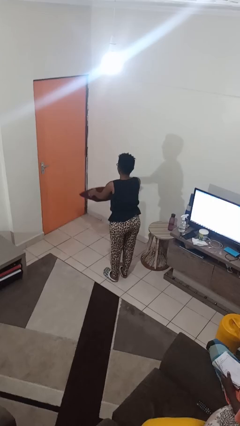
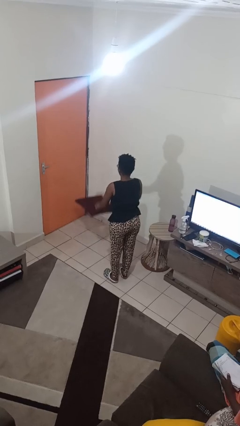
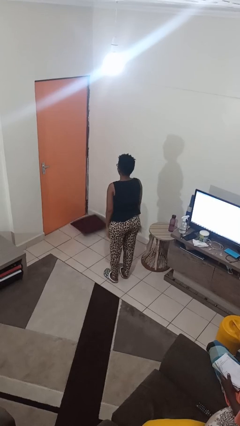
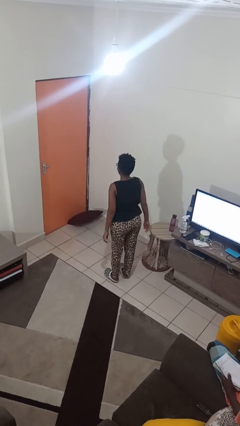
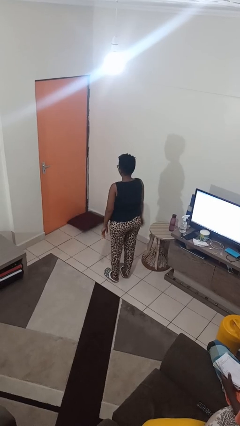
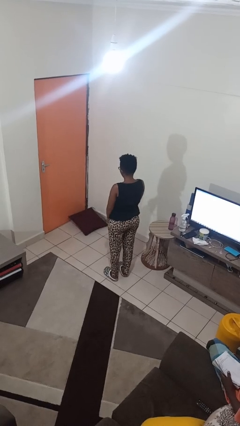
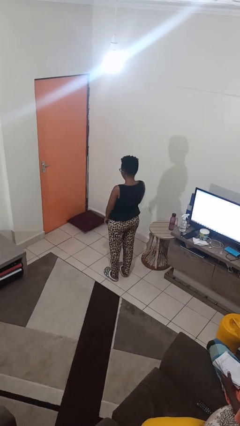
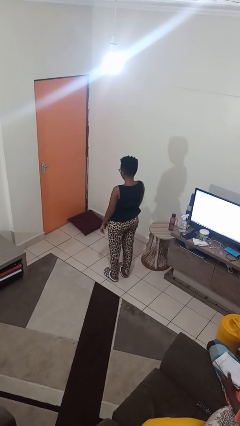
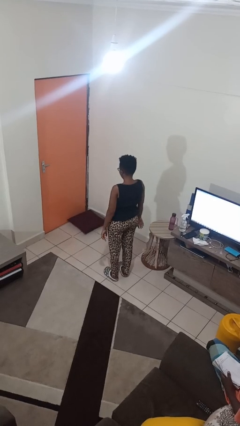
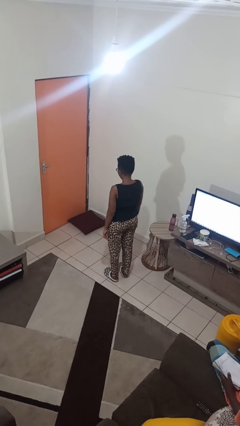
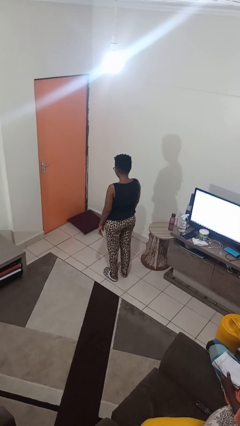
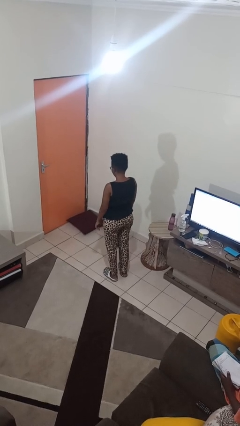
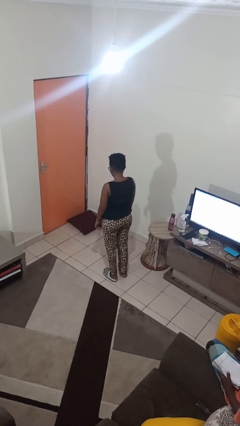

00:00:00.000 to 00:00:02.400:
person throws object to ground

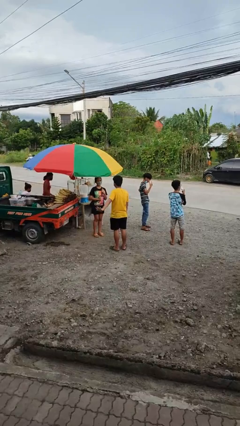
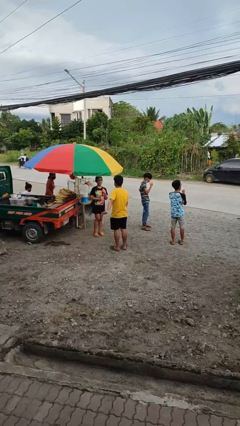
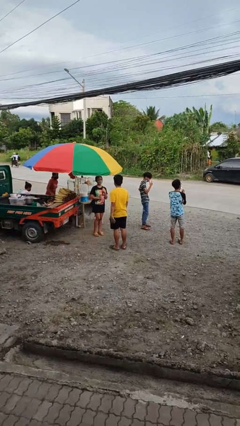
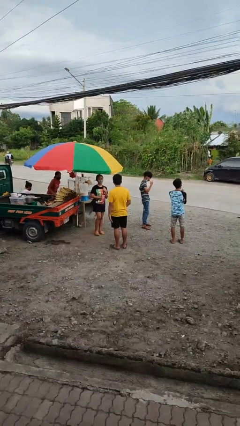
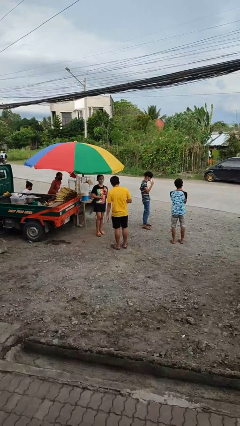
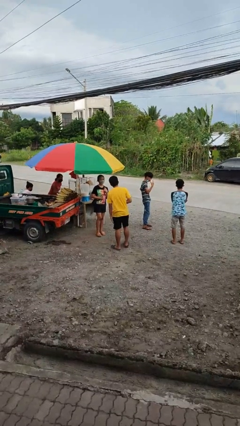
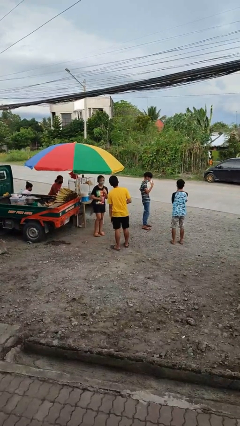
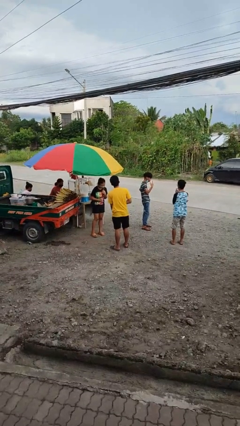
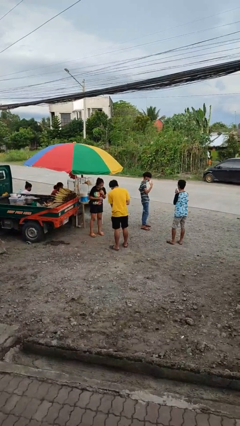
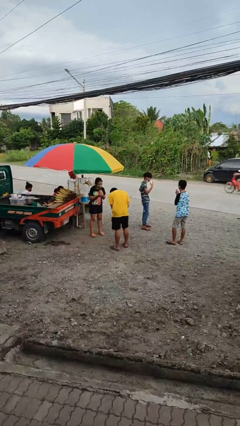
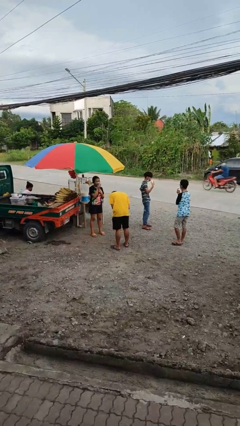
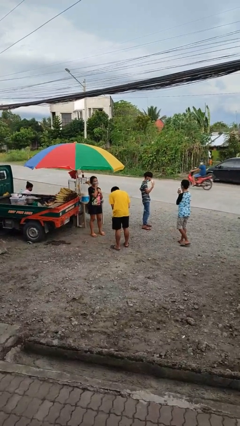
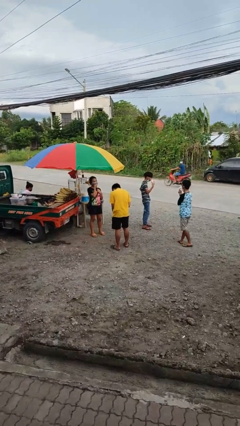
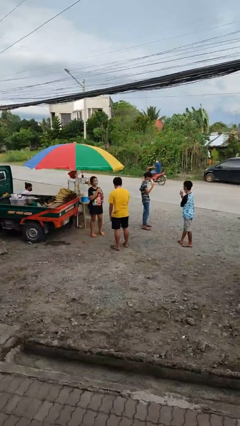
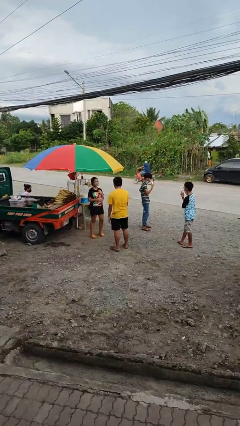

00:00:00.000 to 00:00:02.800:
person laughs with person

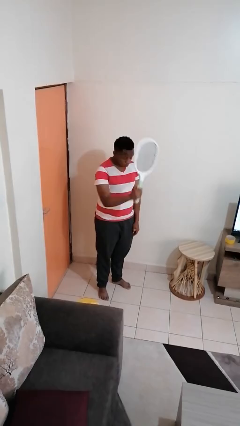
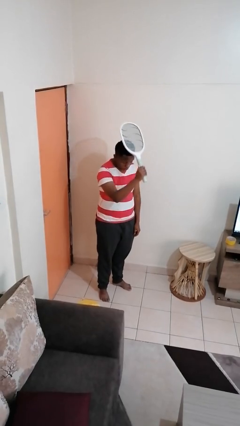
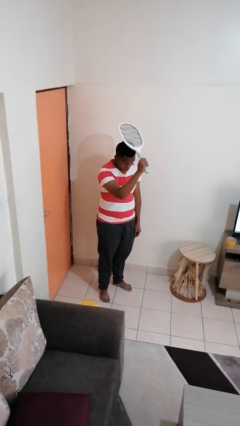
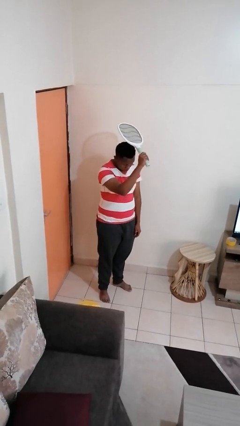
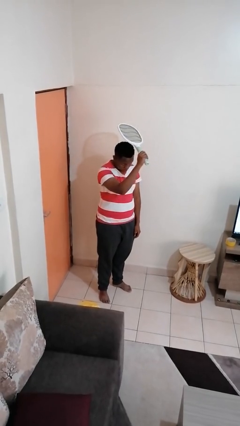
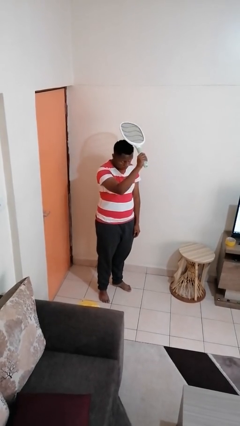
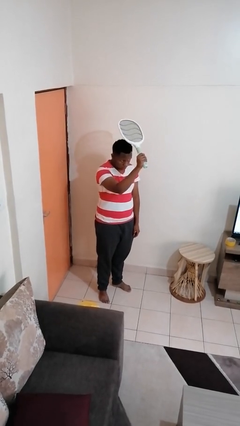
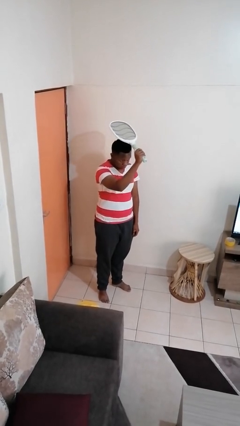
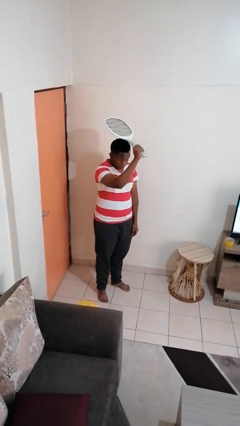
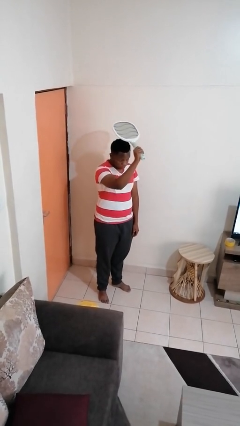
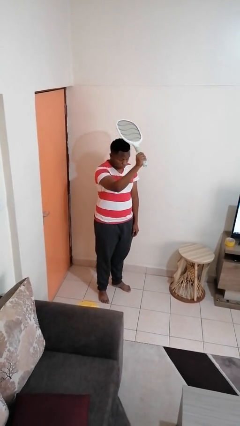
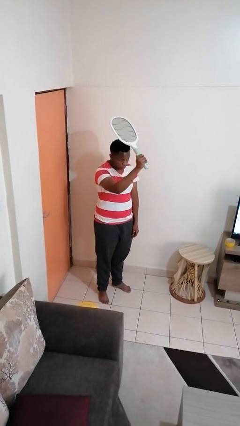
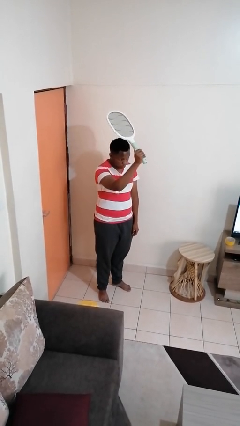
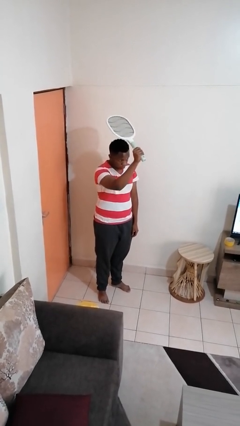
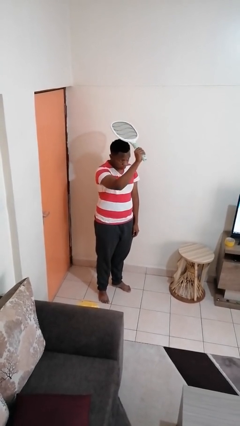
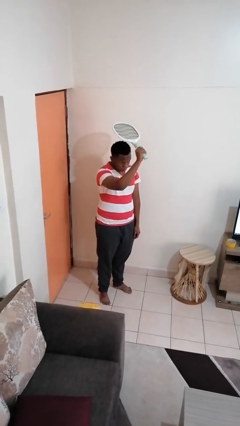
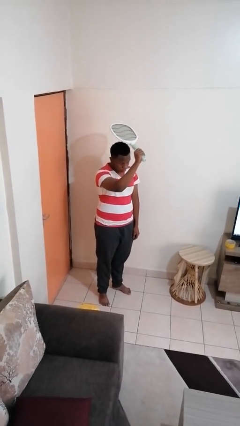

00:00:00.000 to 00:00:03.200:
person holds object above head

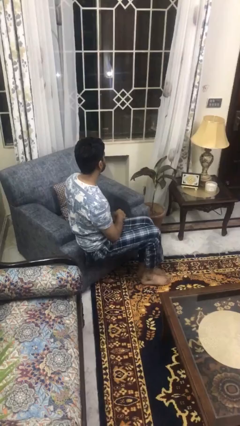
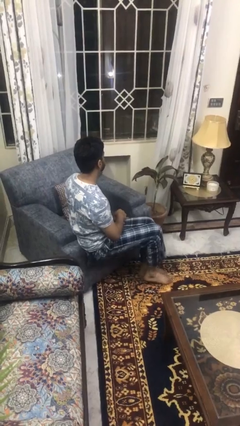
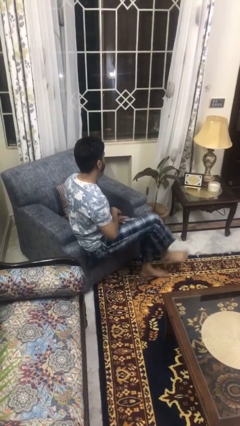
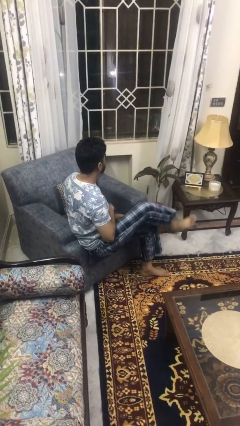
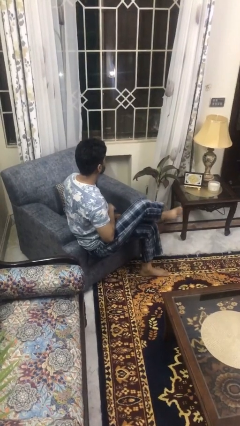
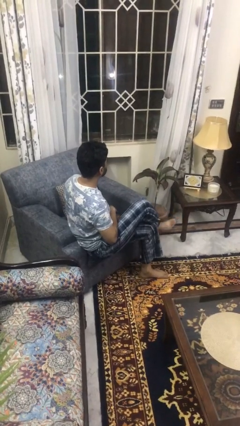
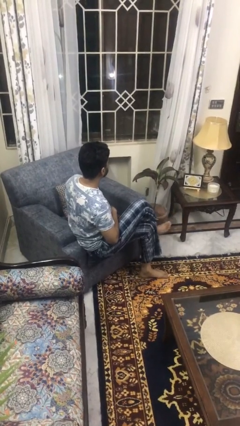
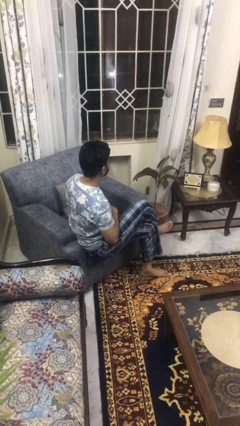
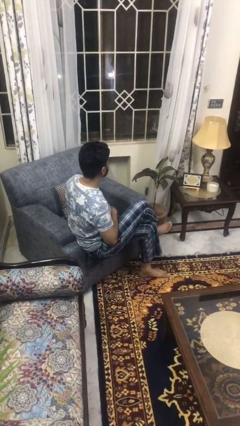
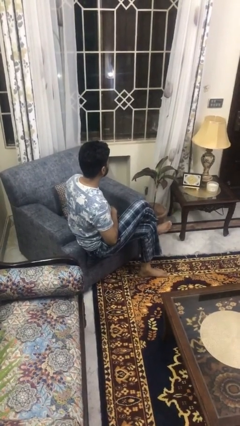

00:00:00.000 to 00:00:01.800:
person crosses legs

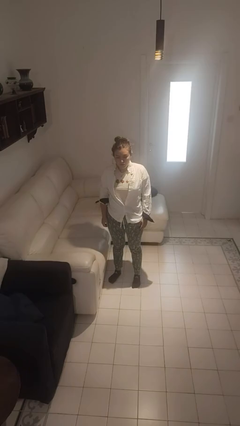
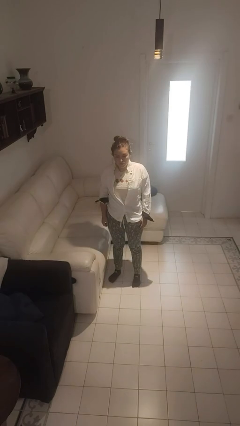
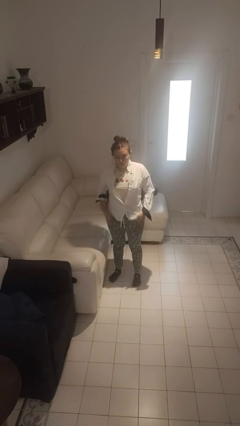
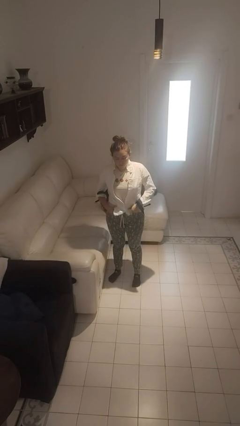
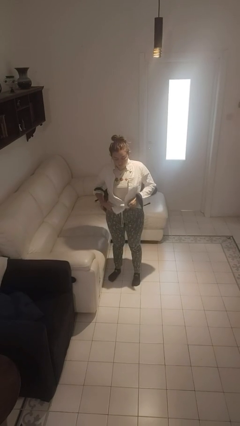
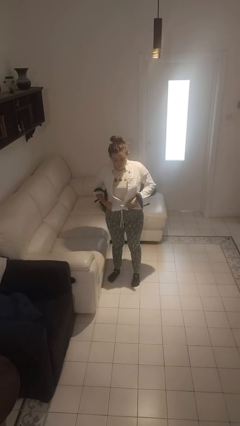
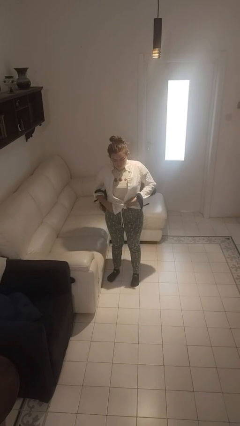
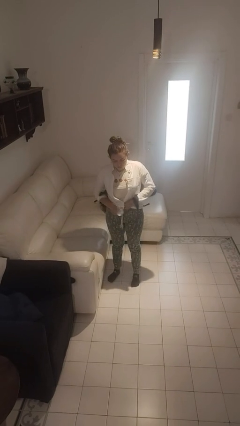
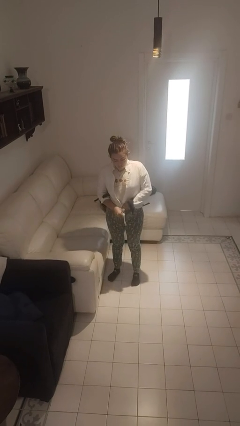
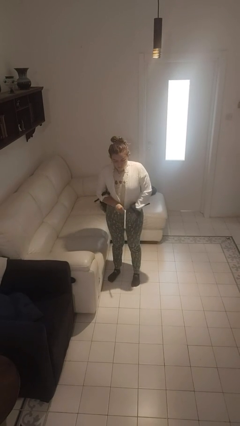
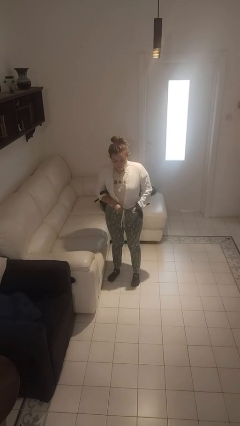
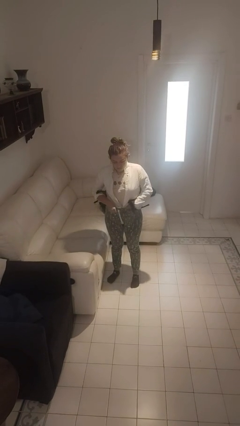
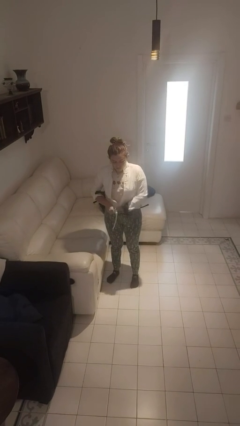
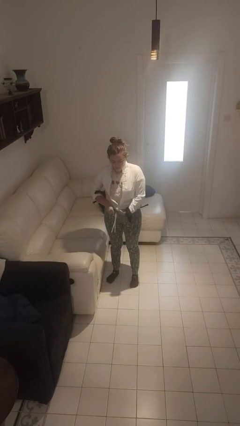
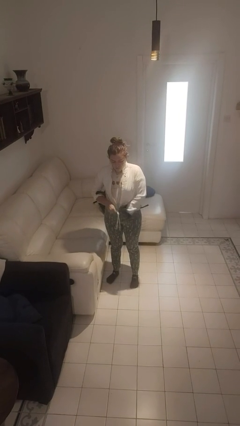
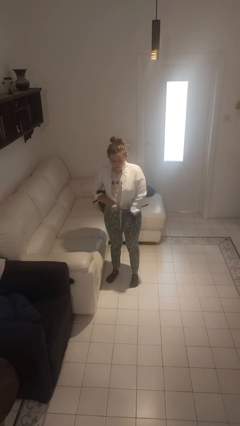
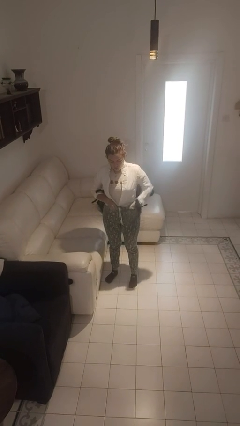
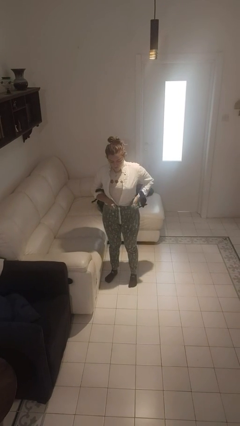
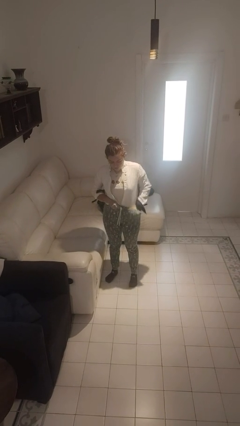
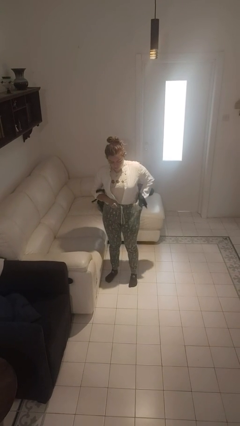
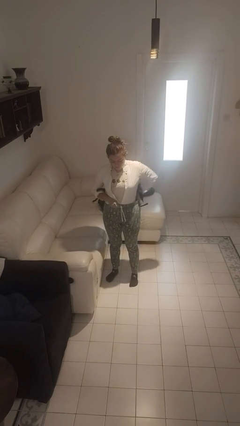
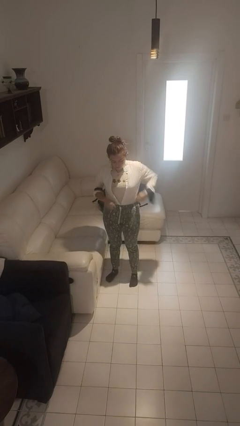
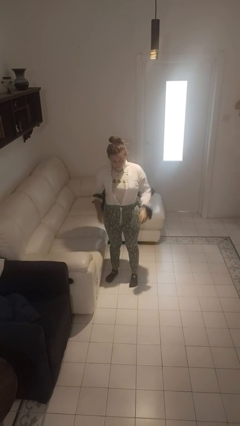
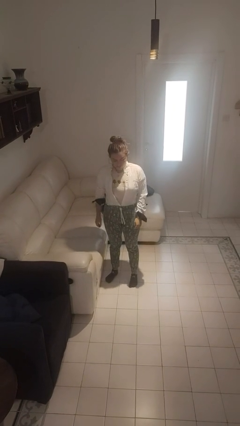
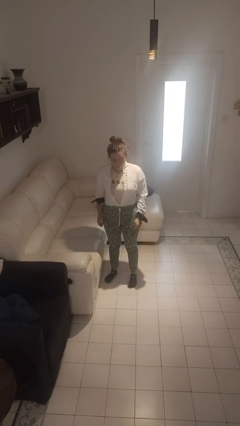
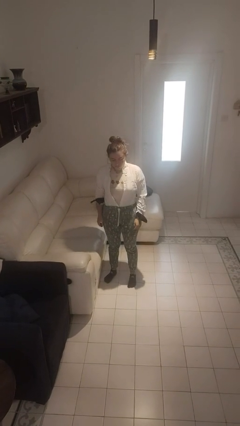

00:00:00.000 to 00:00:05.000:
person tucks in shirt

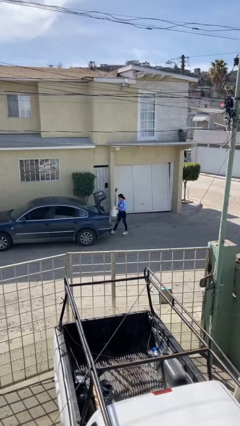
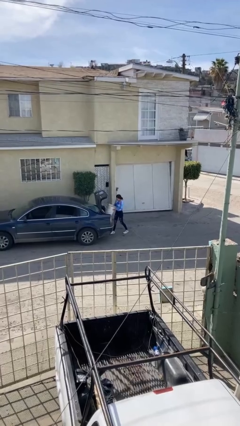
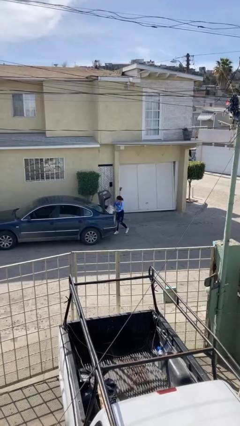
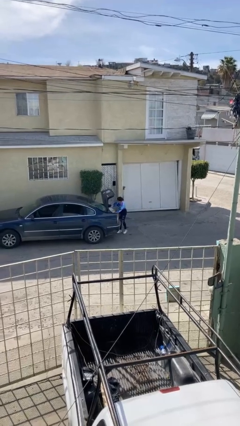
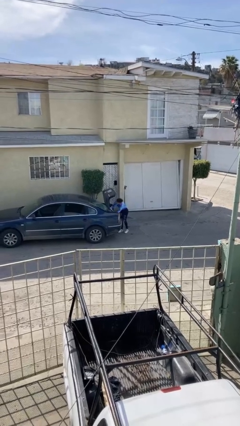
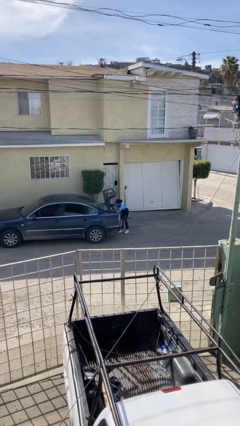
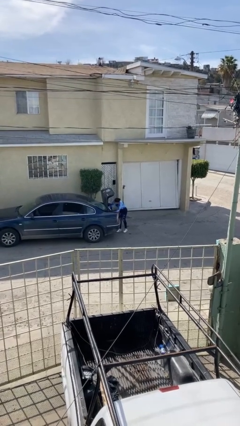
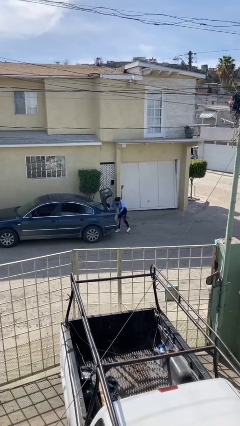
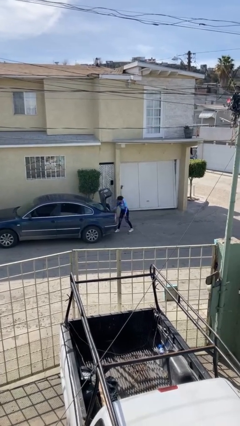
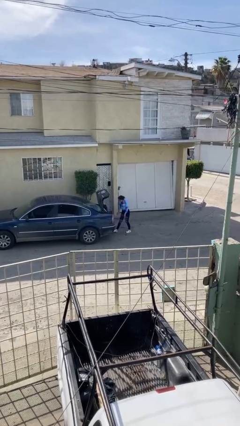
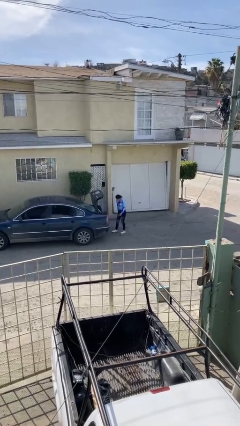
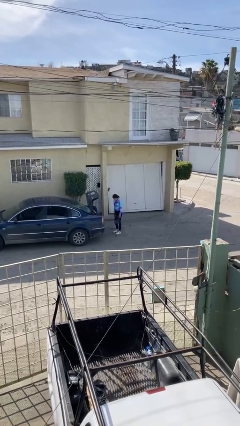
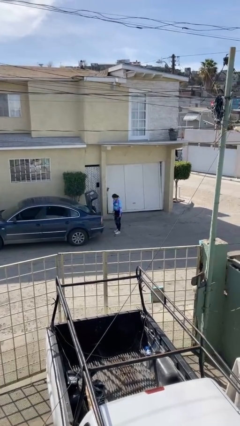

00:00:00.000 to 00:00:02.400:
person loads car
